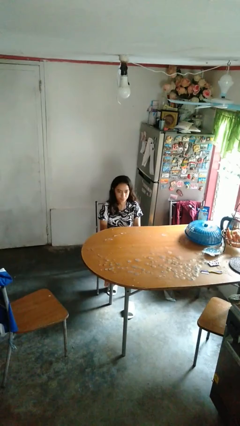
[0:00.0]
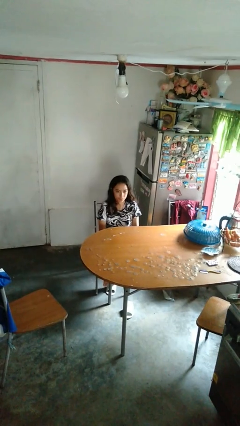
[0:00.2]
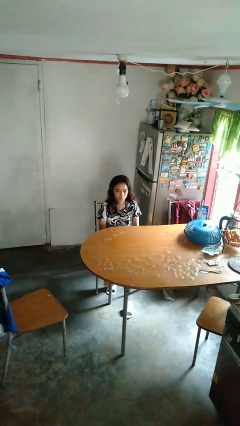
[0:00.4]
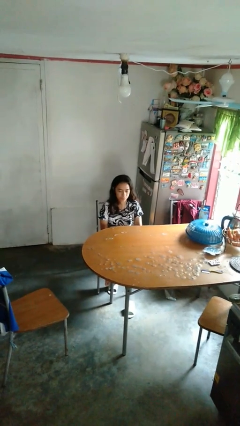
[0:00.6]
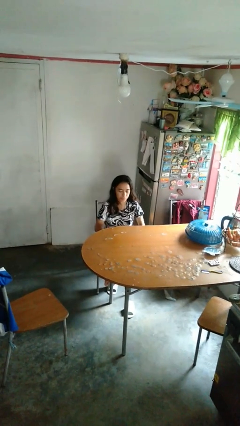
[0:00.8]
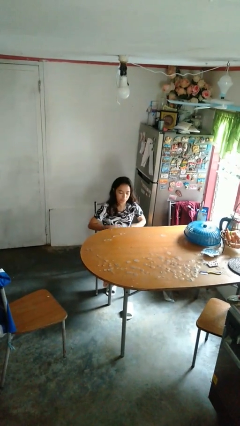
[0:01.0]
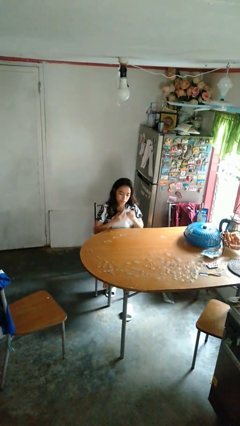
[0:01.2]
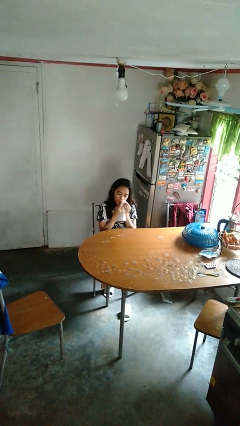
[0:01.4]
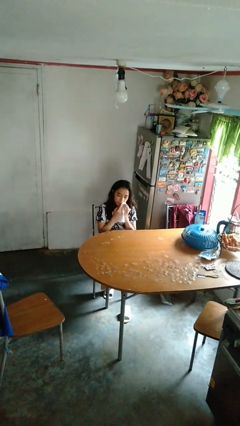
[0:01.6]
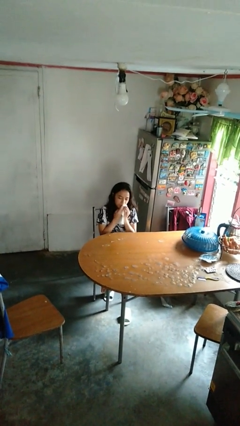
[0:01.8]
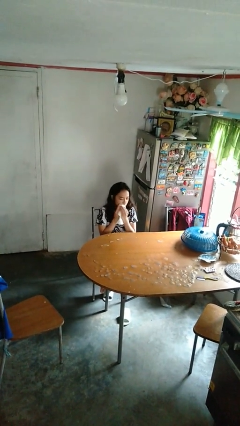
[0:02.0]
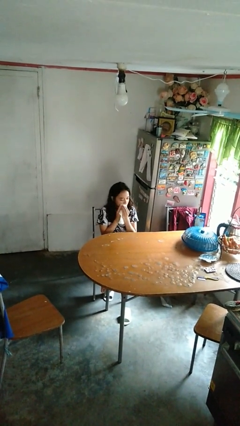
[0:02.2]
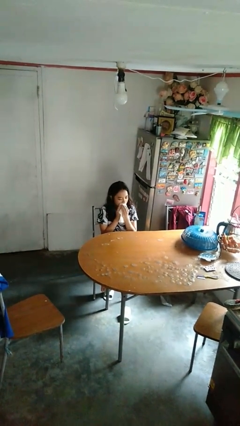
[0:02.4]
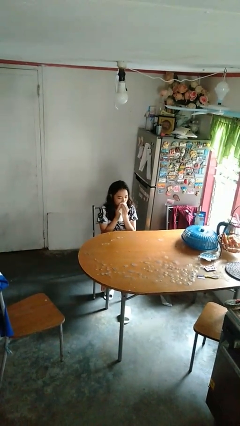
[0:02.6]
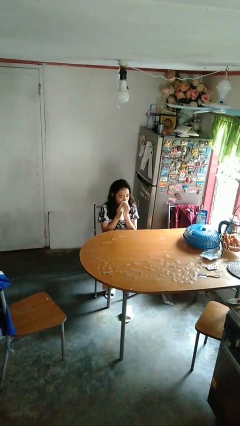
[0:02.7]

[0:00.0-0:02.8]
person wipes mouth with napkin

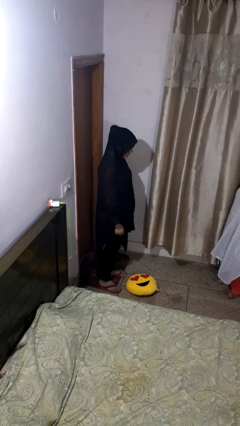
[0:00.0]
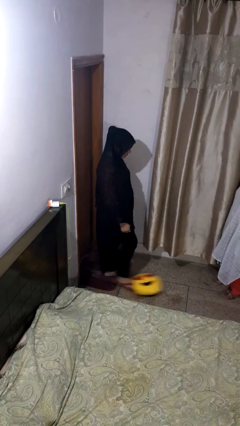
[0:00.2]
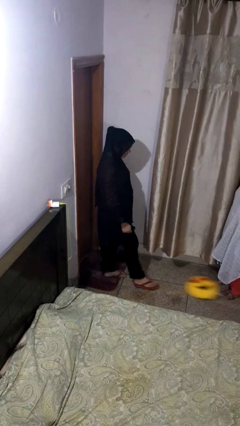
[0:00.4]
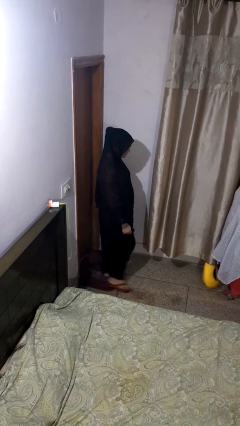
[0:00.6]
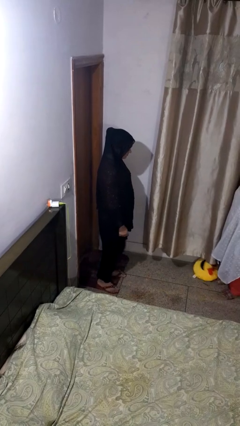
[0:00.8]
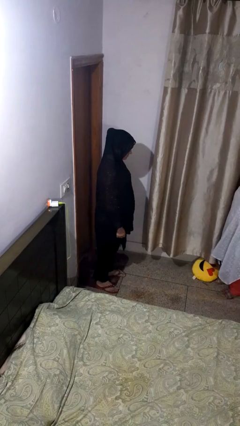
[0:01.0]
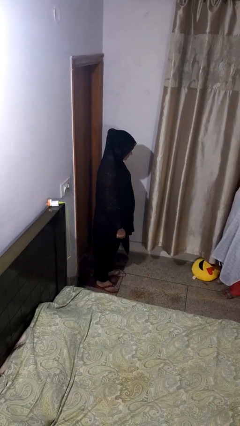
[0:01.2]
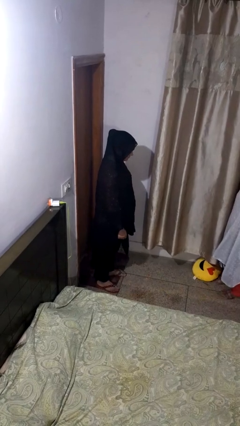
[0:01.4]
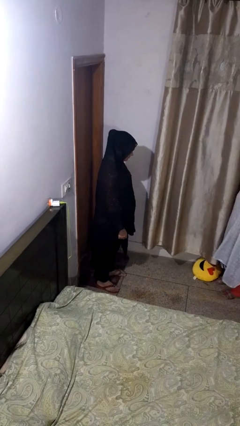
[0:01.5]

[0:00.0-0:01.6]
person kicks object to person

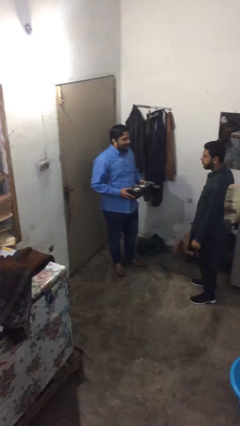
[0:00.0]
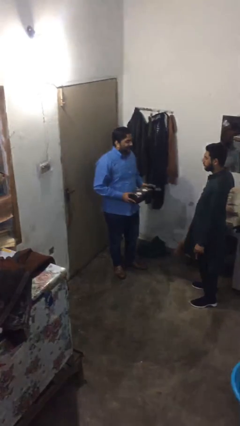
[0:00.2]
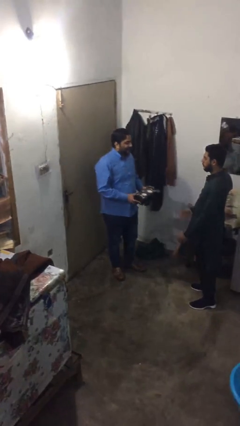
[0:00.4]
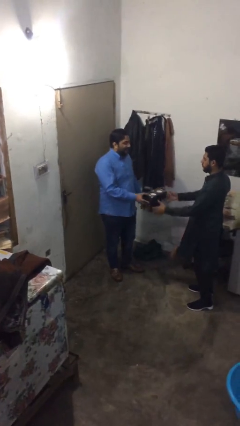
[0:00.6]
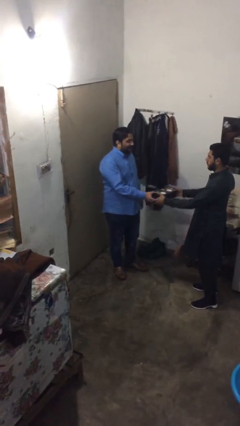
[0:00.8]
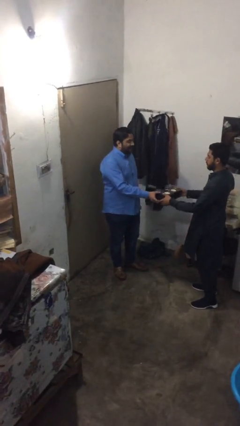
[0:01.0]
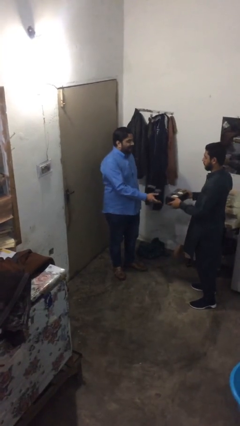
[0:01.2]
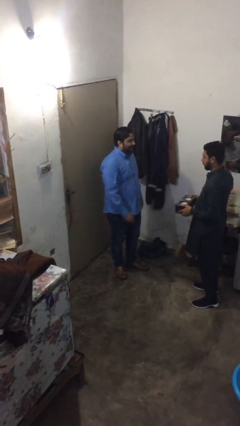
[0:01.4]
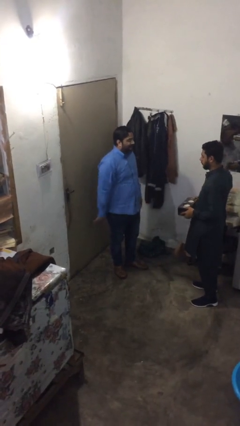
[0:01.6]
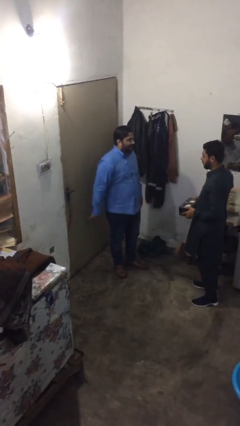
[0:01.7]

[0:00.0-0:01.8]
person transfers object to person

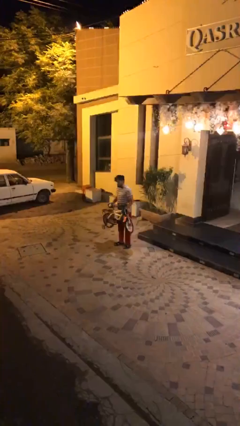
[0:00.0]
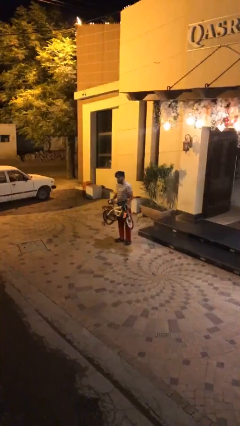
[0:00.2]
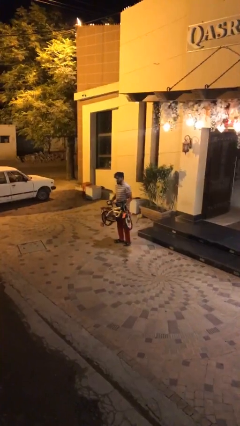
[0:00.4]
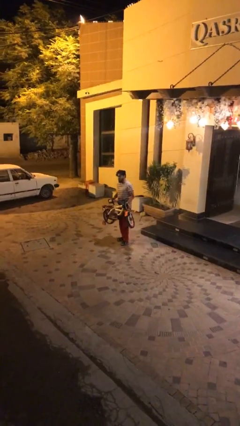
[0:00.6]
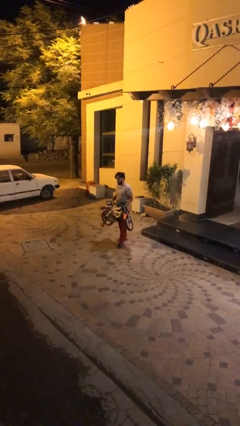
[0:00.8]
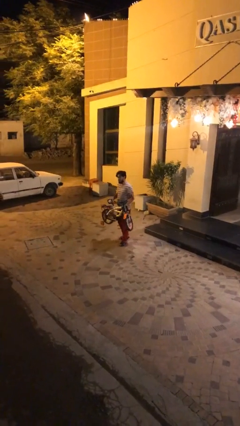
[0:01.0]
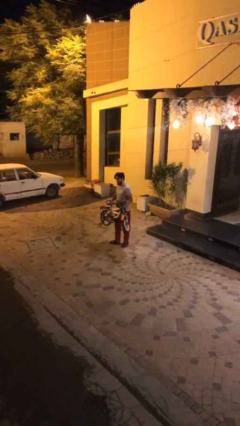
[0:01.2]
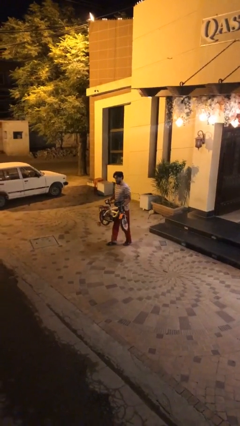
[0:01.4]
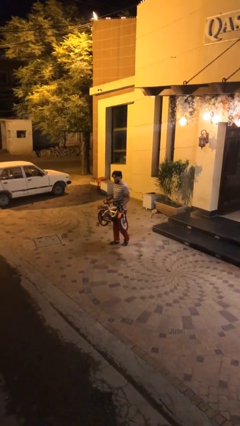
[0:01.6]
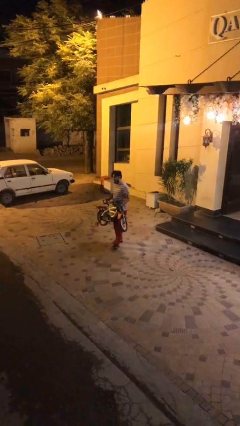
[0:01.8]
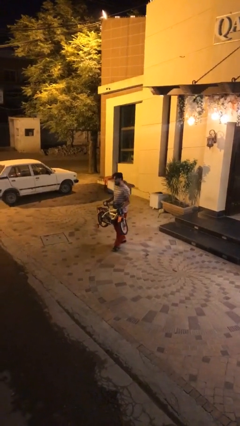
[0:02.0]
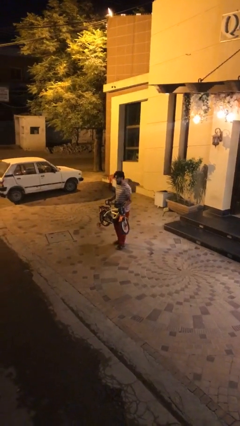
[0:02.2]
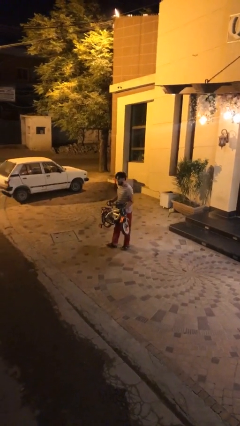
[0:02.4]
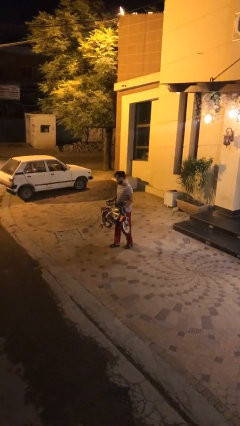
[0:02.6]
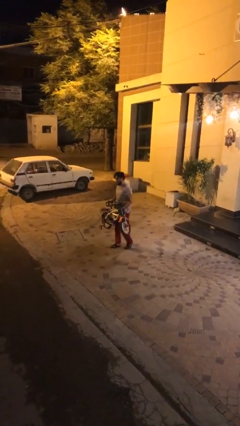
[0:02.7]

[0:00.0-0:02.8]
person carries heavy object

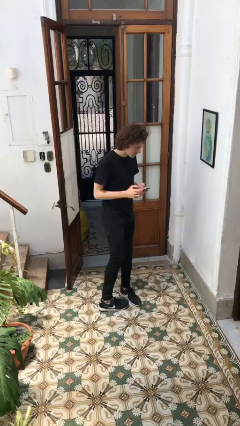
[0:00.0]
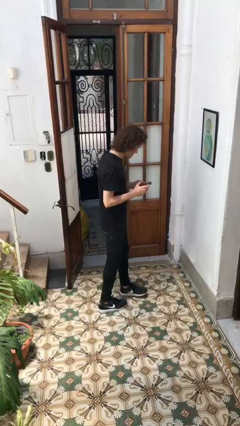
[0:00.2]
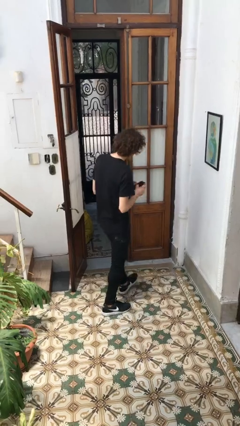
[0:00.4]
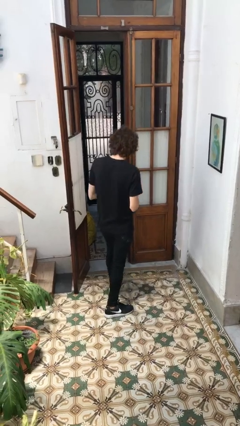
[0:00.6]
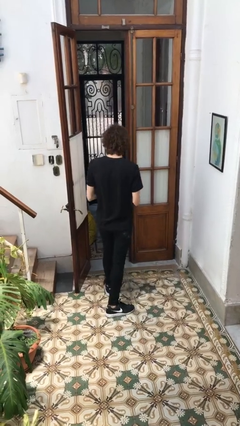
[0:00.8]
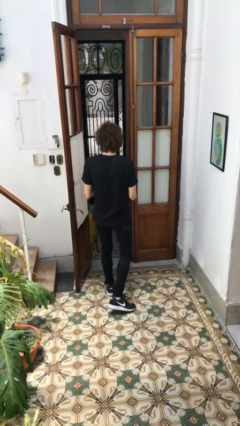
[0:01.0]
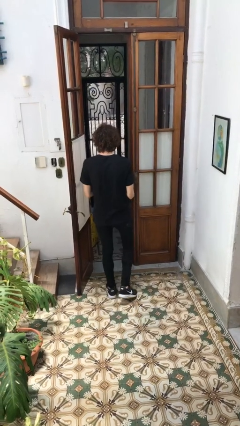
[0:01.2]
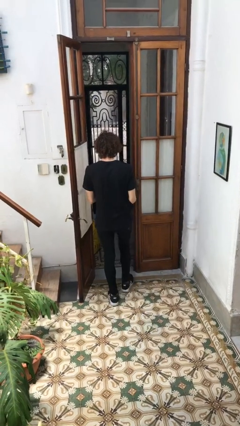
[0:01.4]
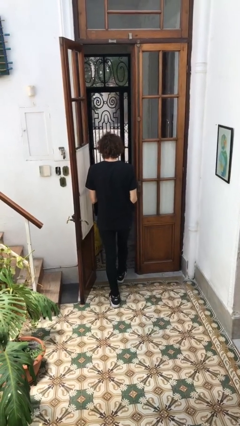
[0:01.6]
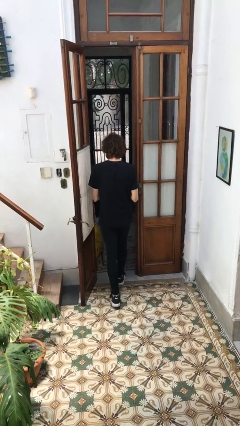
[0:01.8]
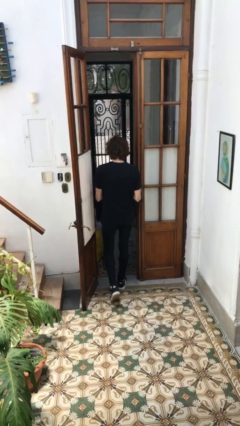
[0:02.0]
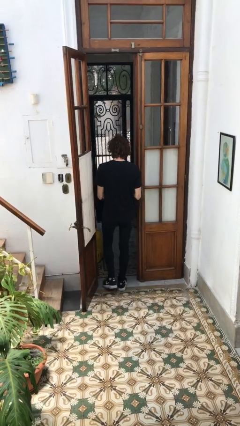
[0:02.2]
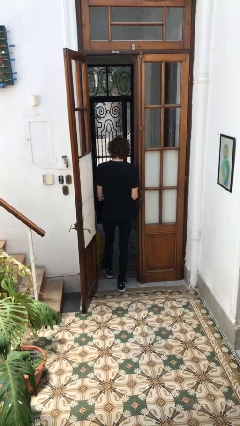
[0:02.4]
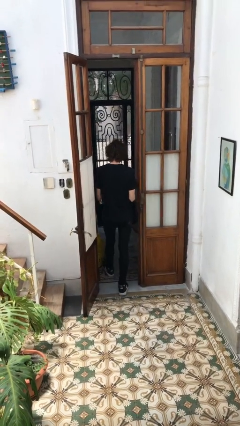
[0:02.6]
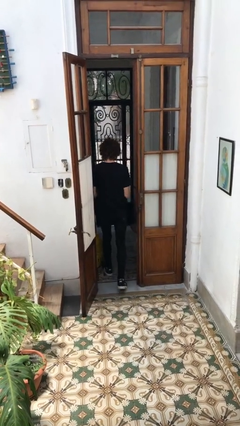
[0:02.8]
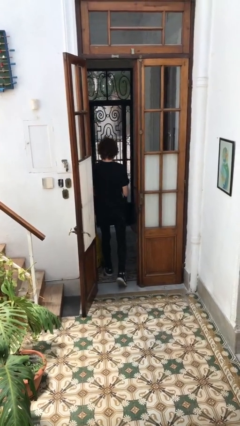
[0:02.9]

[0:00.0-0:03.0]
person exits scene through structure

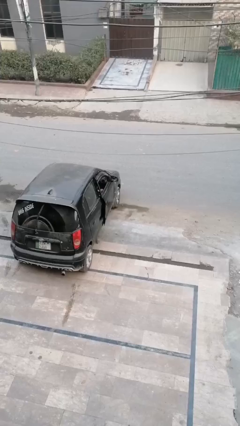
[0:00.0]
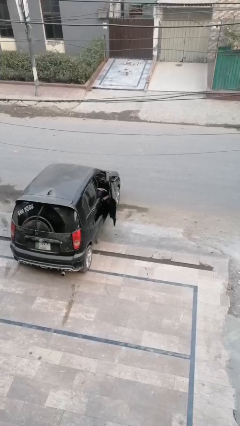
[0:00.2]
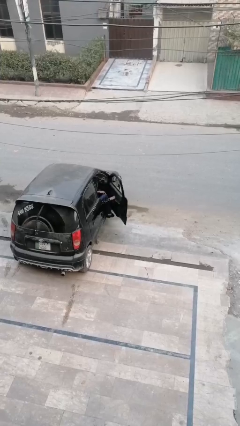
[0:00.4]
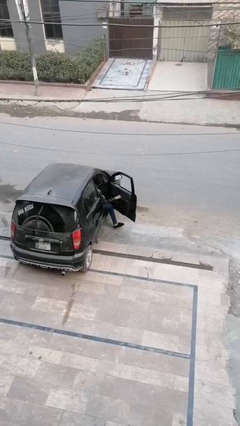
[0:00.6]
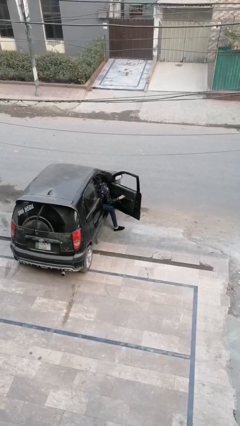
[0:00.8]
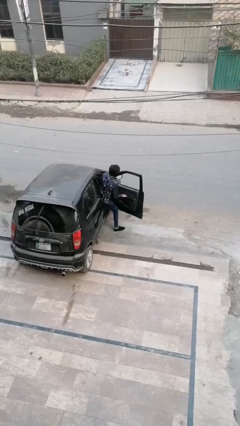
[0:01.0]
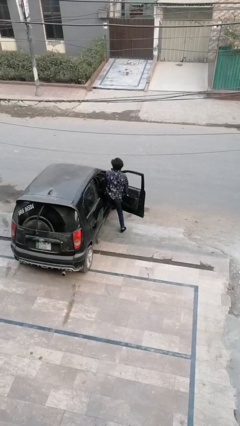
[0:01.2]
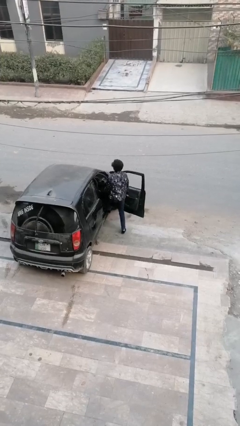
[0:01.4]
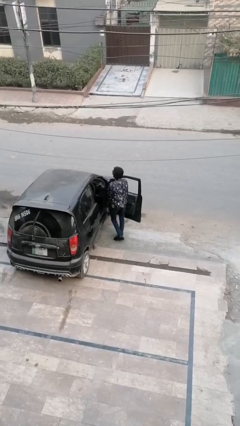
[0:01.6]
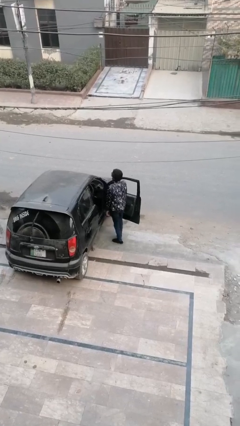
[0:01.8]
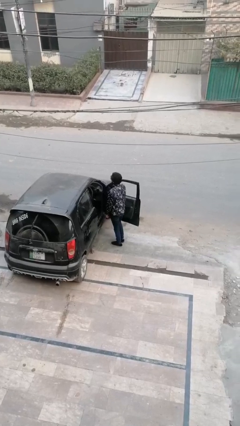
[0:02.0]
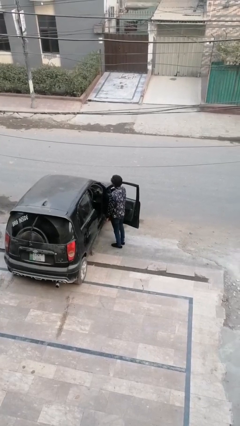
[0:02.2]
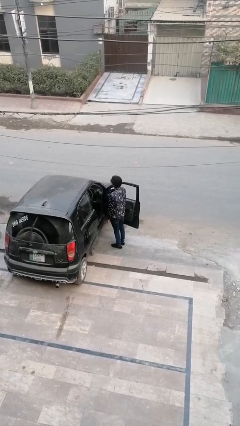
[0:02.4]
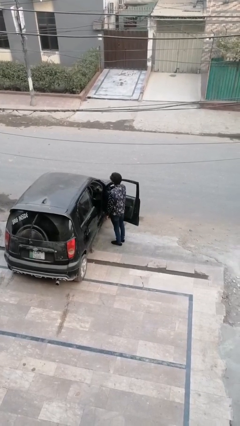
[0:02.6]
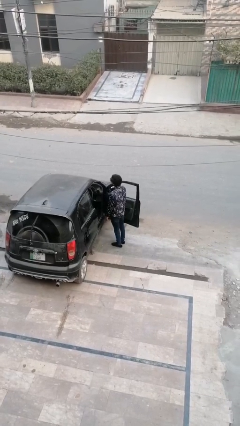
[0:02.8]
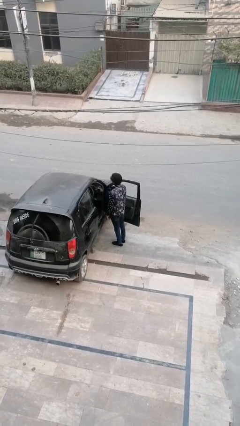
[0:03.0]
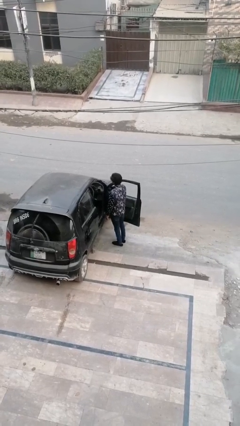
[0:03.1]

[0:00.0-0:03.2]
person exits car

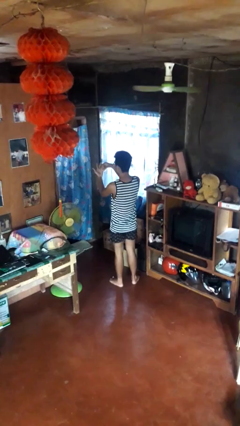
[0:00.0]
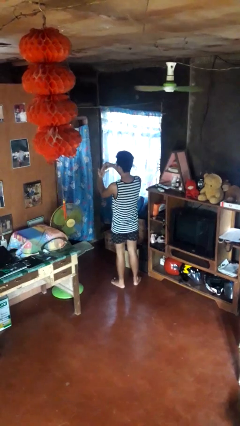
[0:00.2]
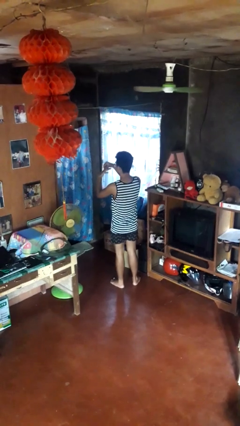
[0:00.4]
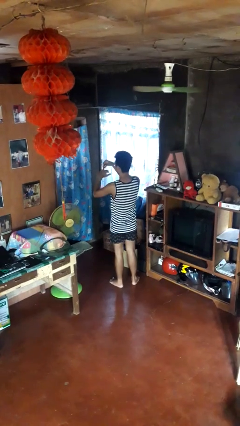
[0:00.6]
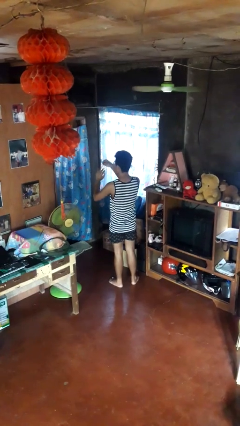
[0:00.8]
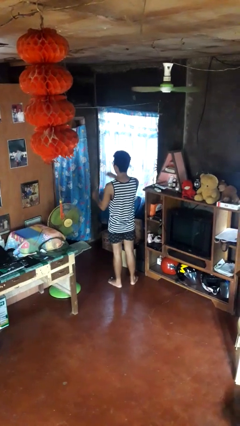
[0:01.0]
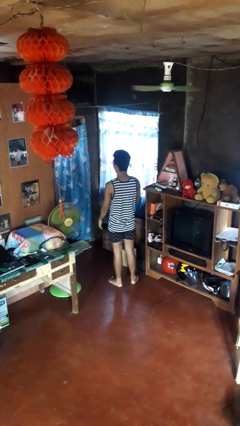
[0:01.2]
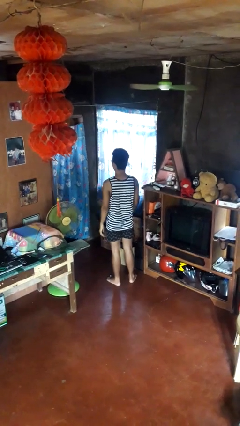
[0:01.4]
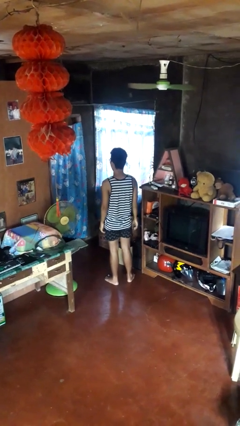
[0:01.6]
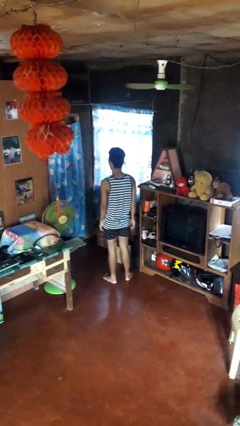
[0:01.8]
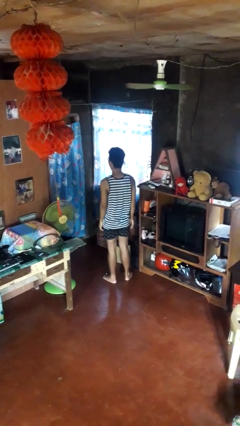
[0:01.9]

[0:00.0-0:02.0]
person takes off ring
